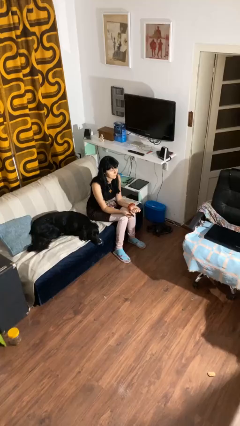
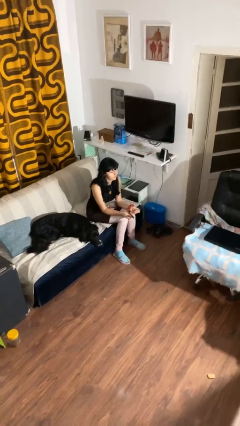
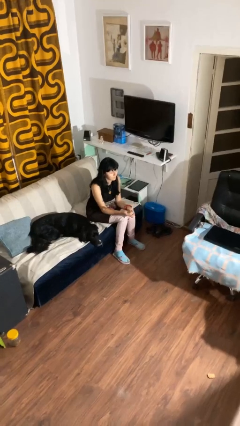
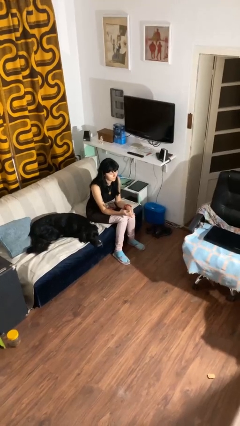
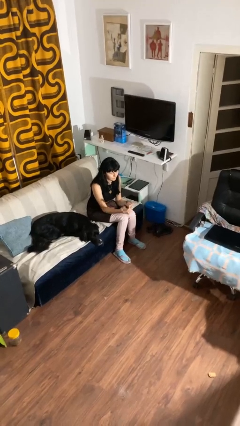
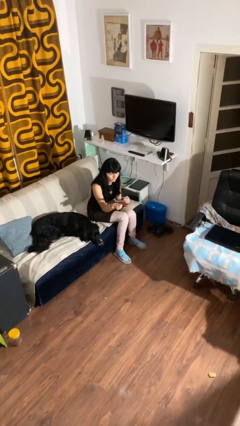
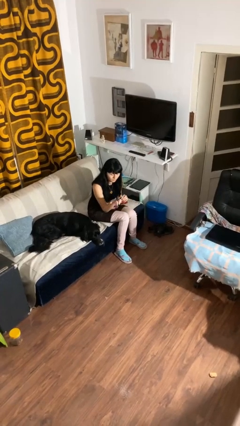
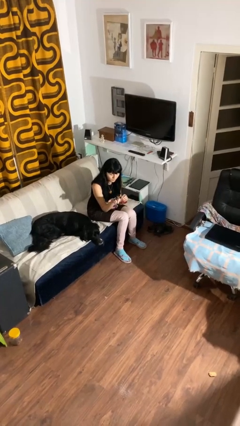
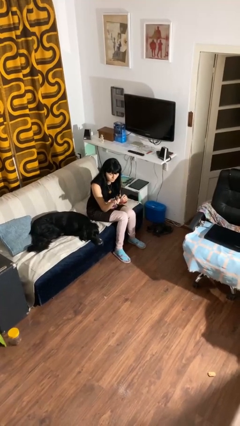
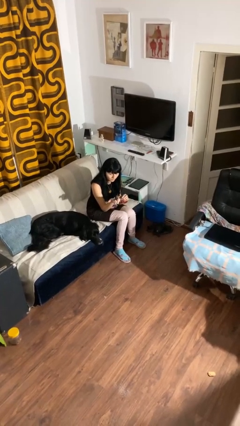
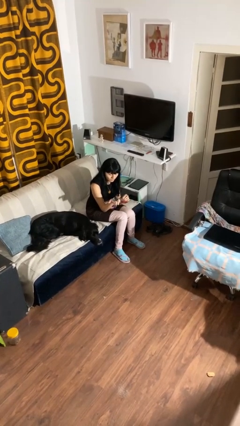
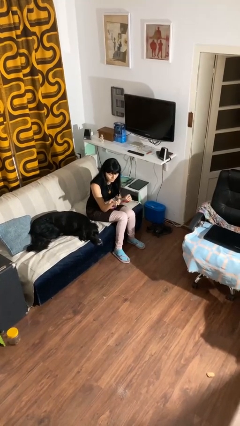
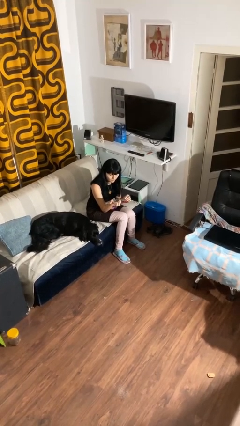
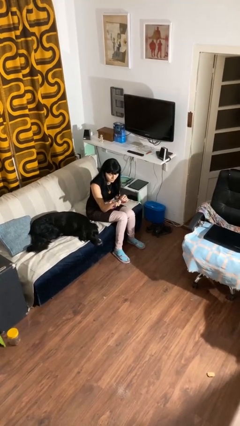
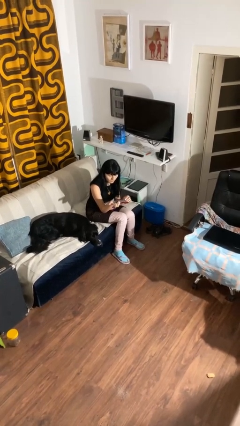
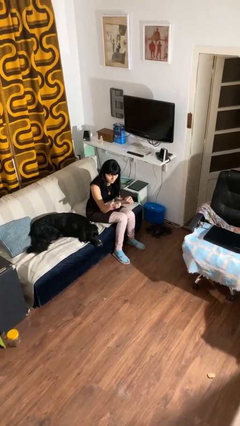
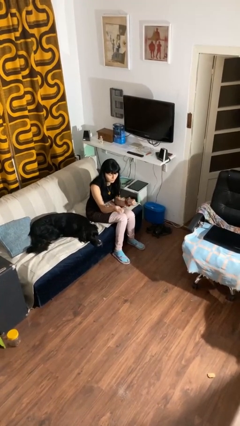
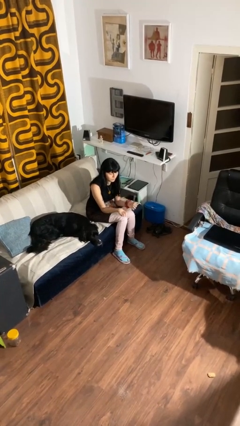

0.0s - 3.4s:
person files fingernails

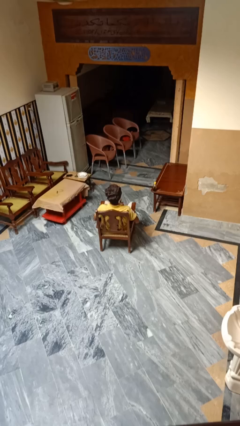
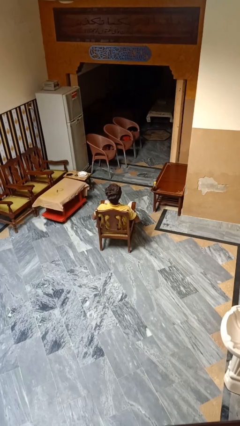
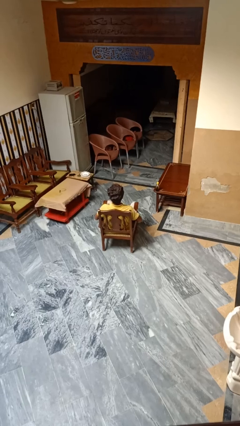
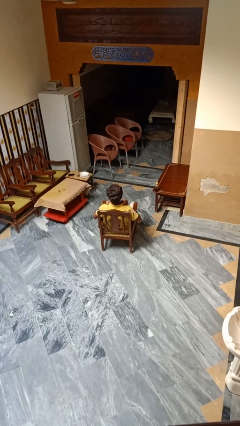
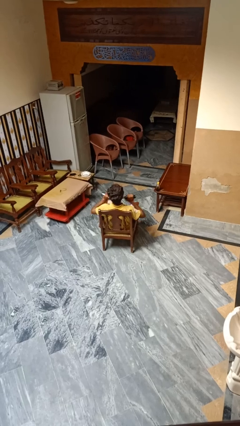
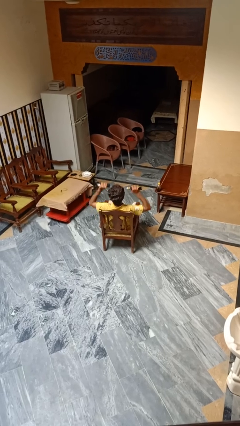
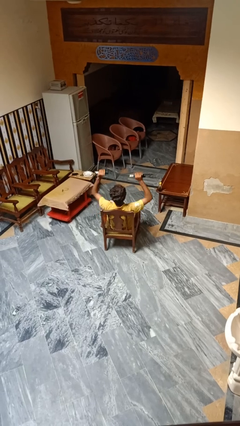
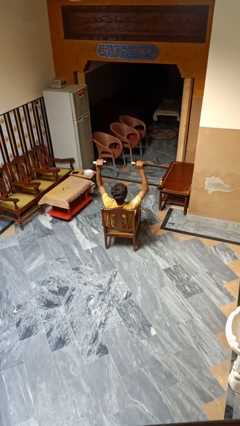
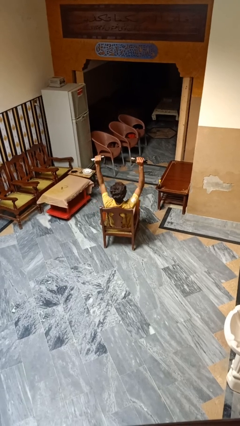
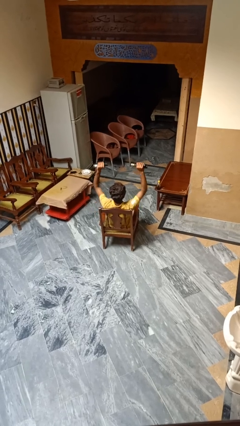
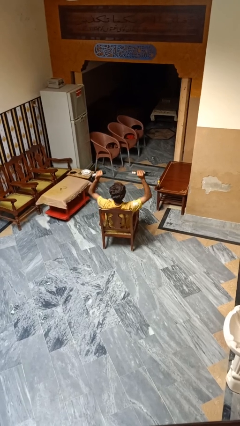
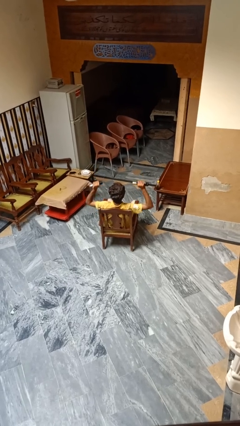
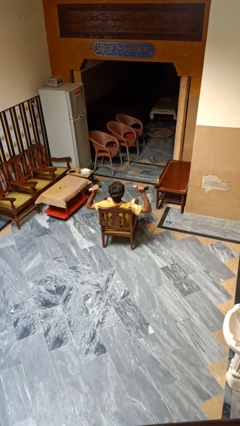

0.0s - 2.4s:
person lifts dumbbells

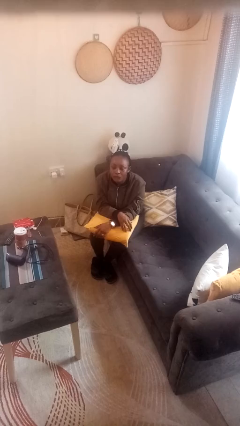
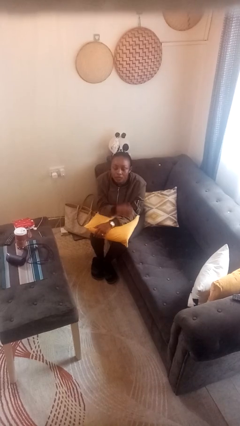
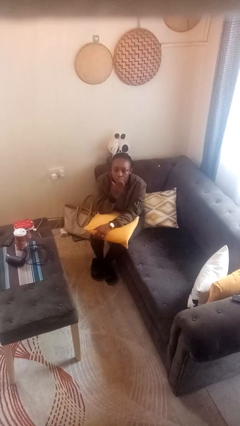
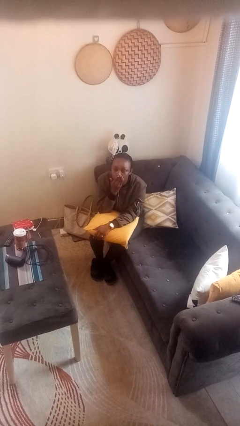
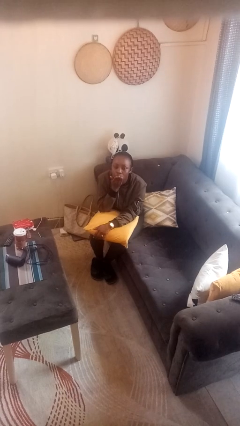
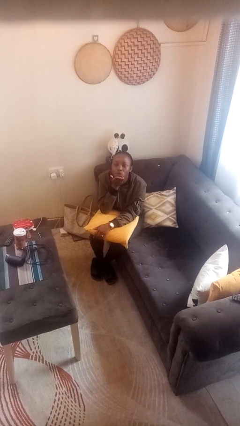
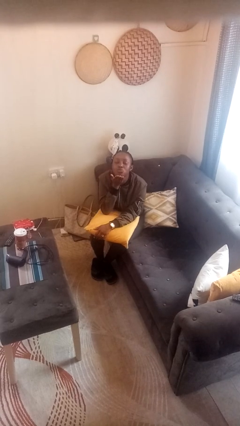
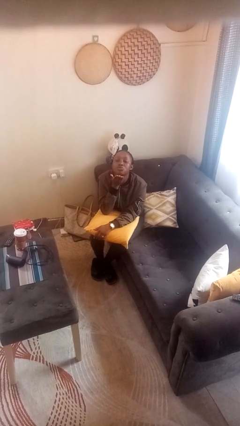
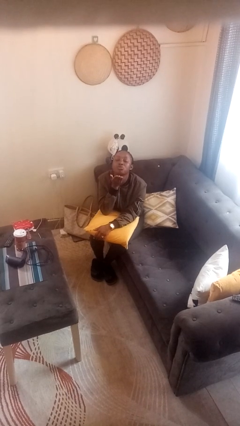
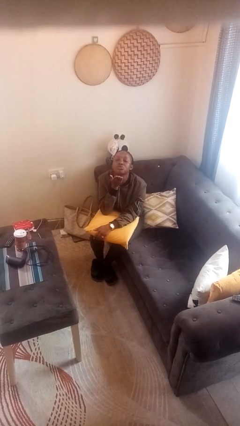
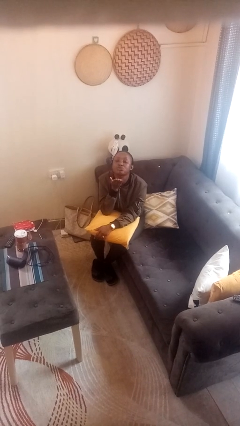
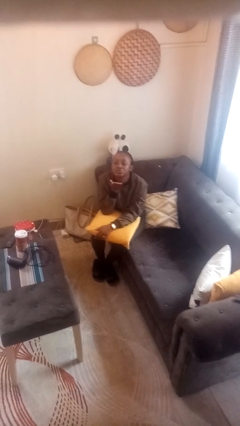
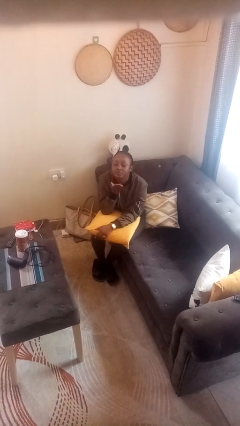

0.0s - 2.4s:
person gestures blow kiss

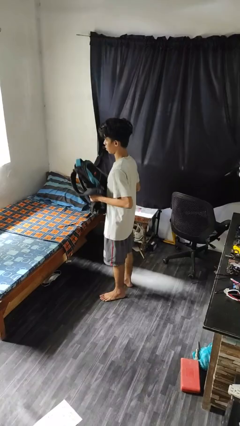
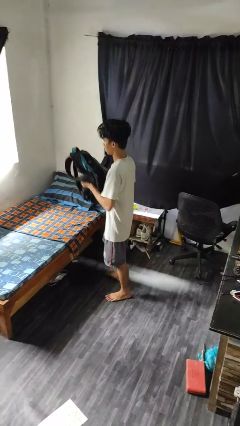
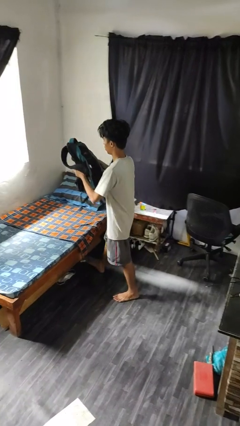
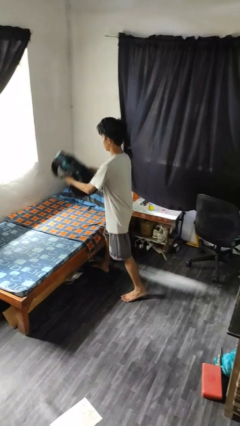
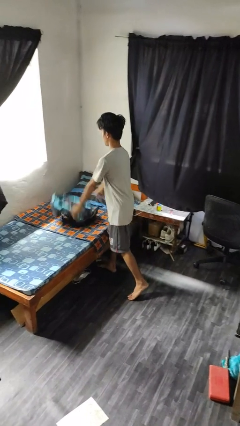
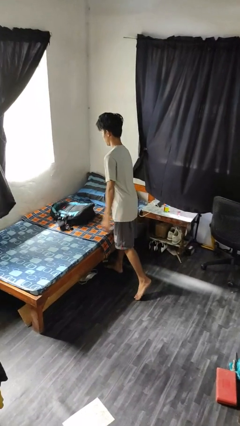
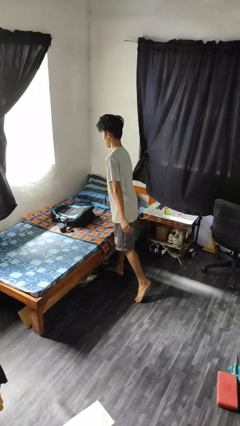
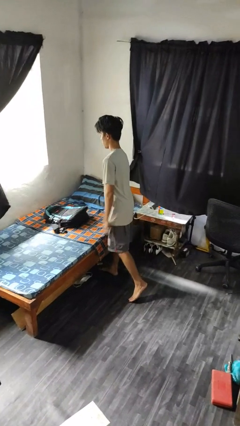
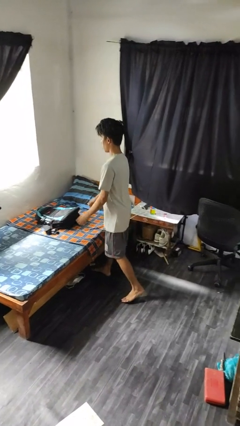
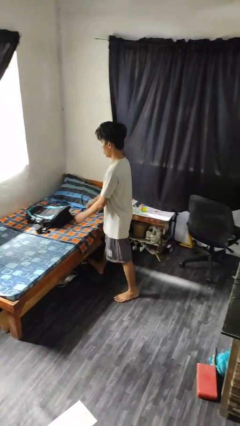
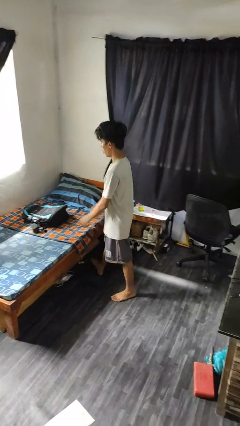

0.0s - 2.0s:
person puts down object on bed

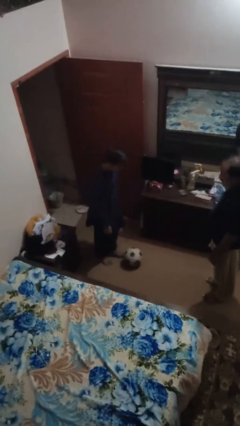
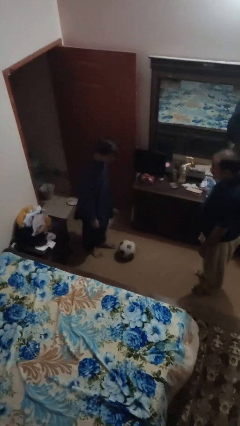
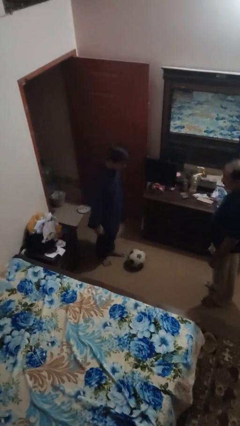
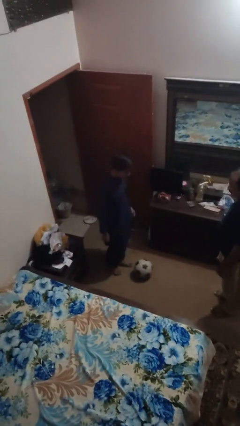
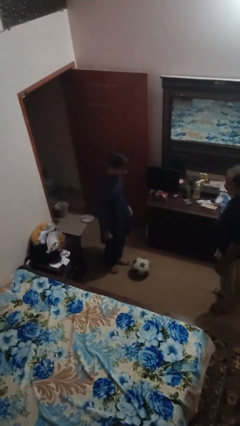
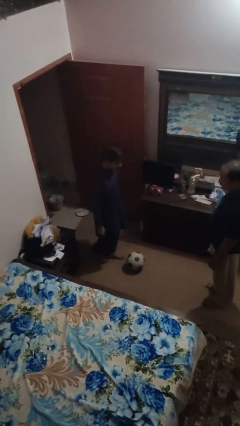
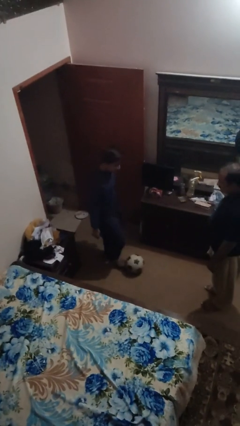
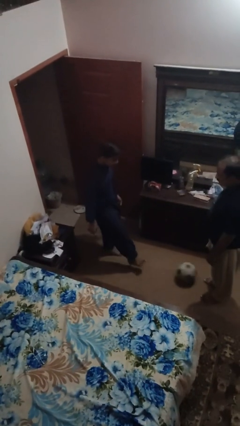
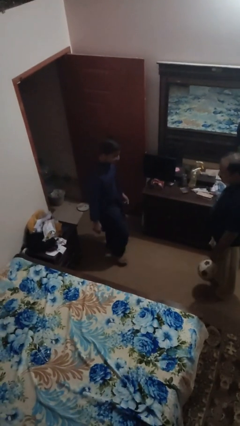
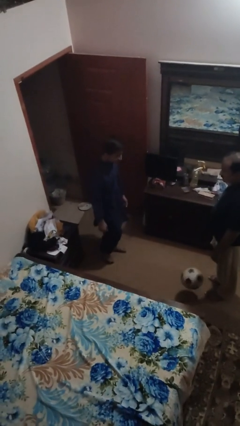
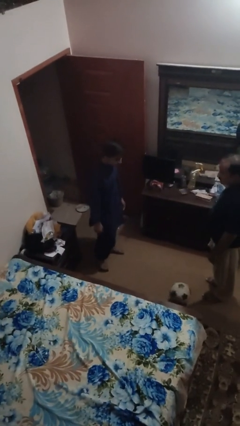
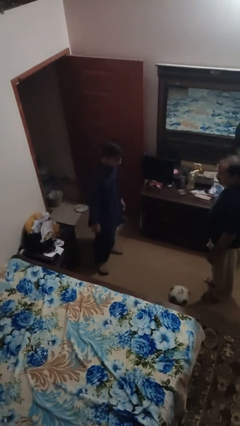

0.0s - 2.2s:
person kicks object to person

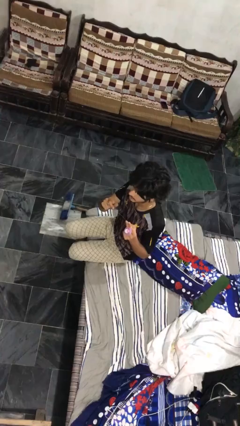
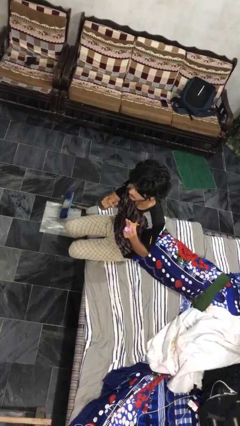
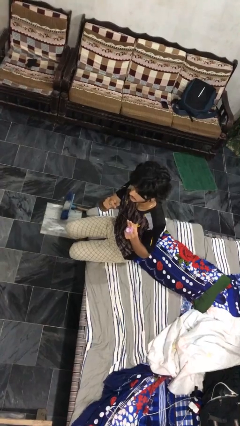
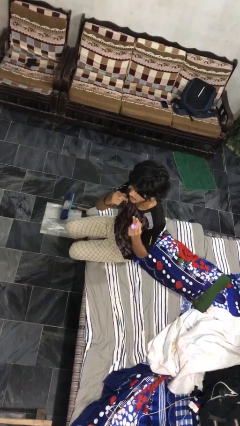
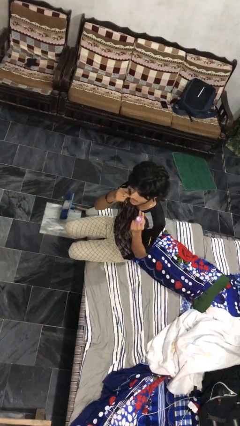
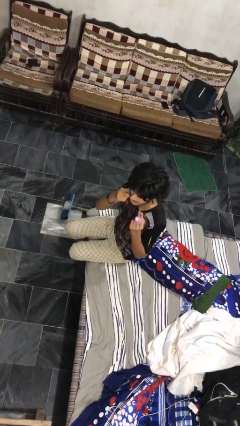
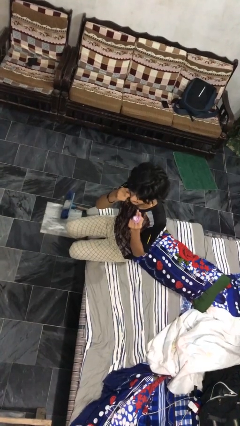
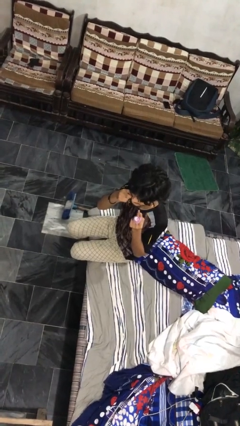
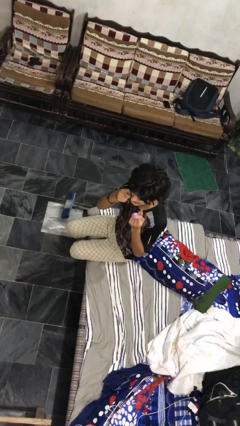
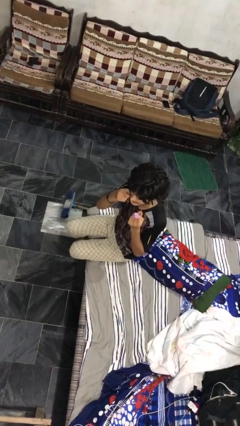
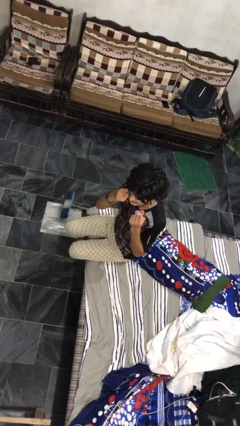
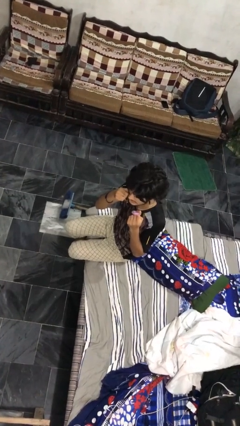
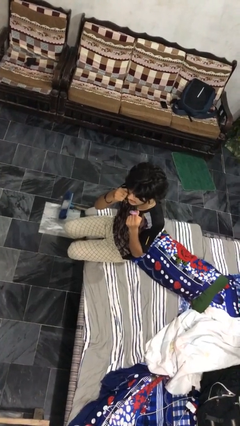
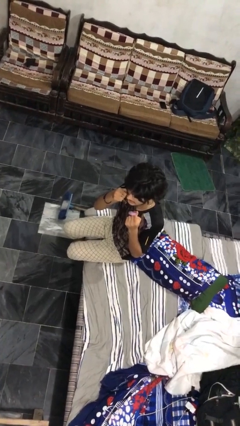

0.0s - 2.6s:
person flosses

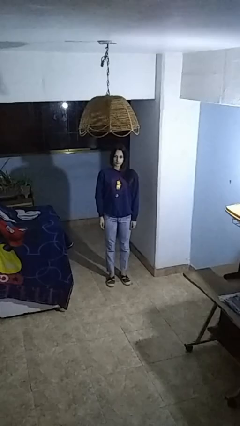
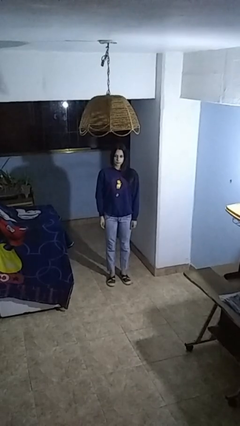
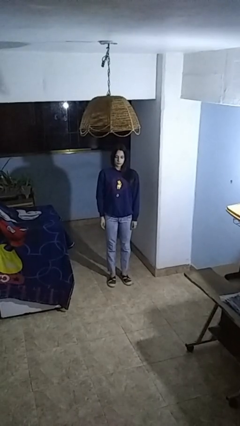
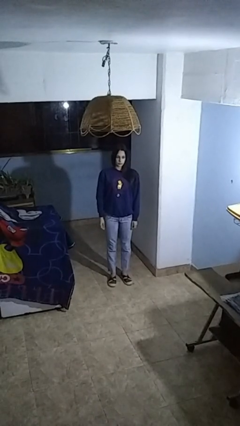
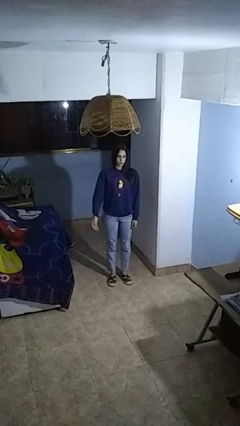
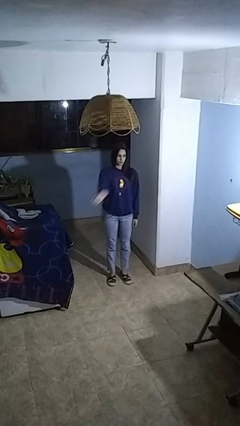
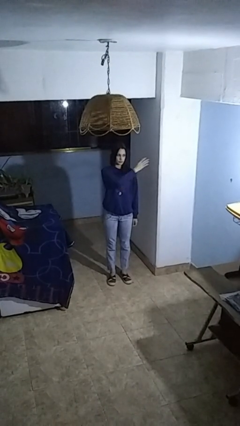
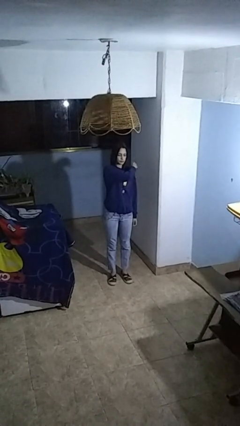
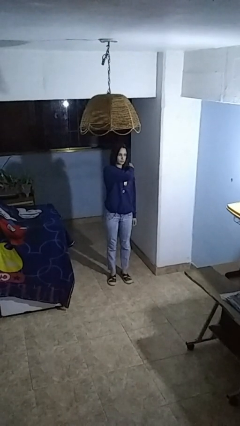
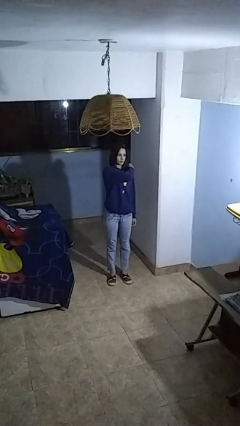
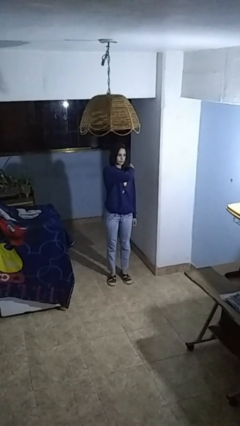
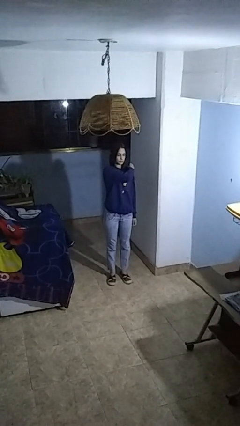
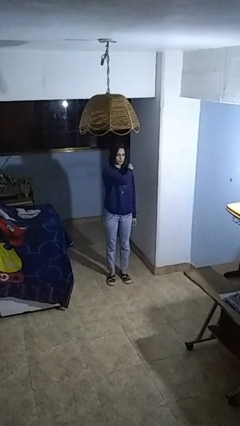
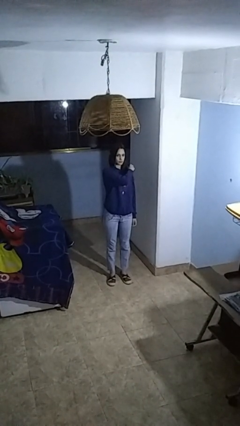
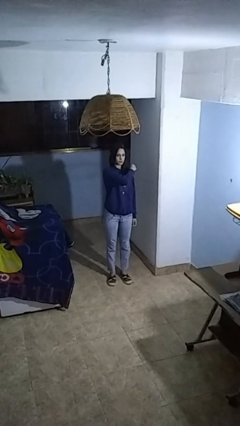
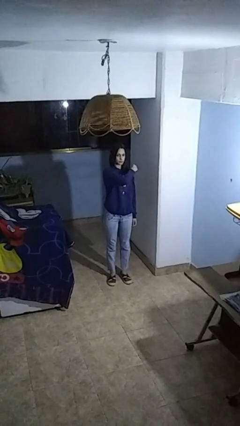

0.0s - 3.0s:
person gestures swipe left
